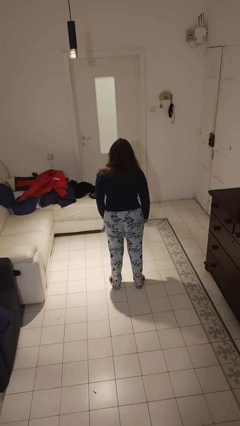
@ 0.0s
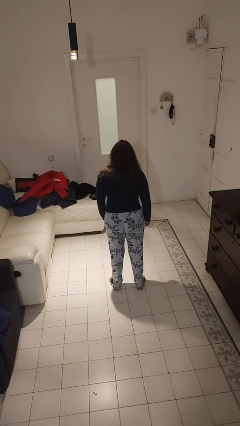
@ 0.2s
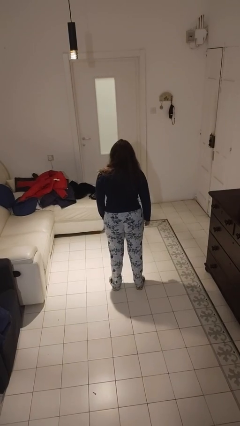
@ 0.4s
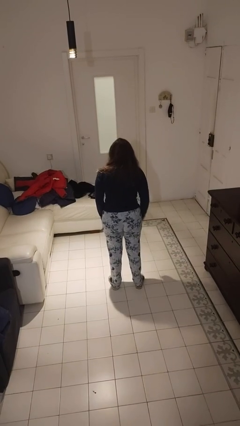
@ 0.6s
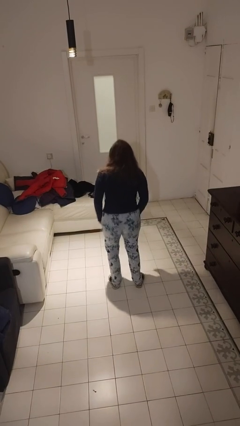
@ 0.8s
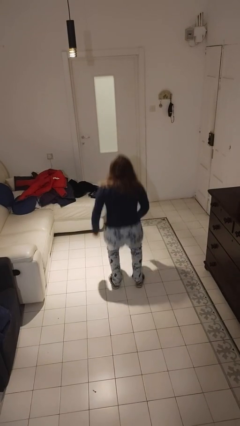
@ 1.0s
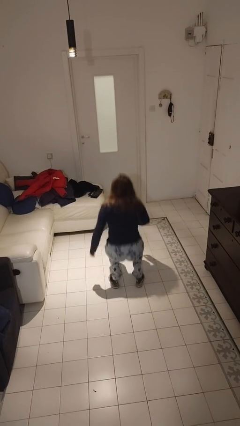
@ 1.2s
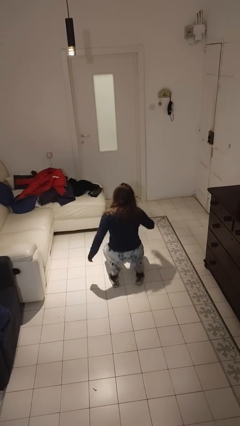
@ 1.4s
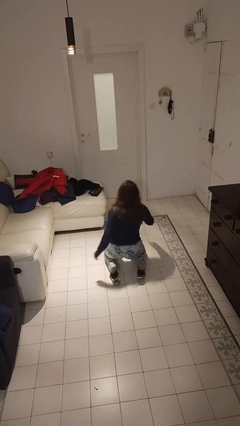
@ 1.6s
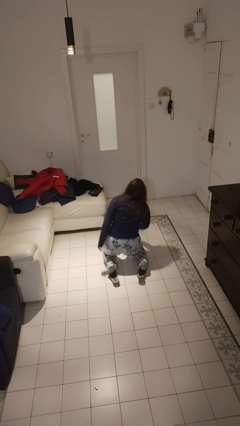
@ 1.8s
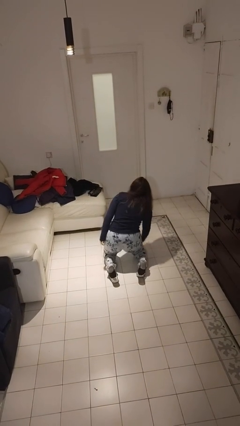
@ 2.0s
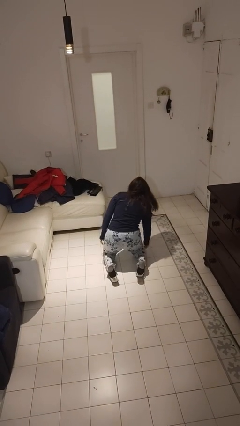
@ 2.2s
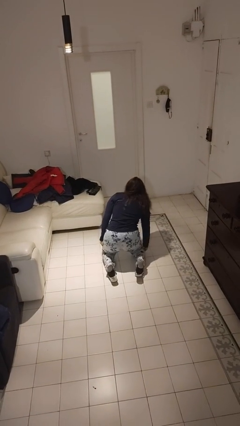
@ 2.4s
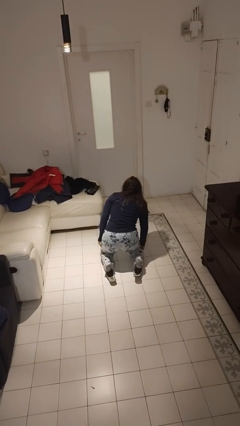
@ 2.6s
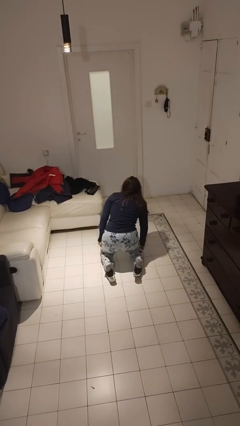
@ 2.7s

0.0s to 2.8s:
person falls while standing

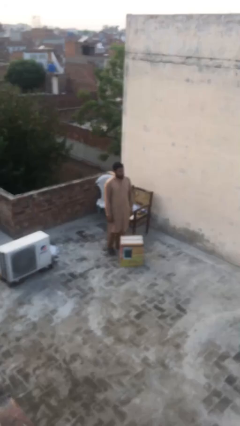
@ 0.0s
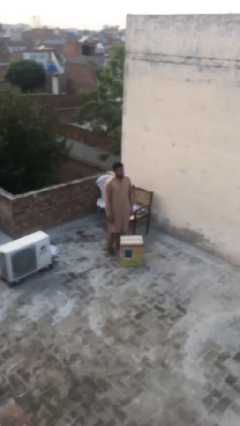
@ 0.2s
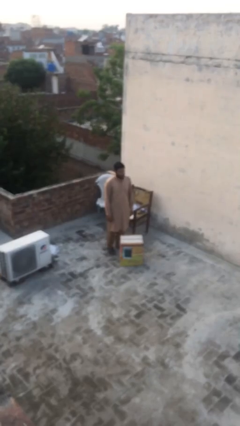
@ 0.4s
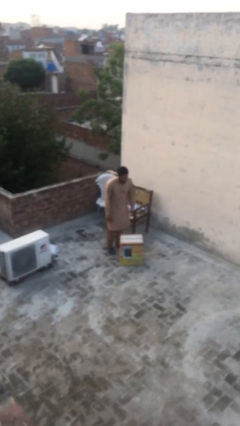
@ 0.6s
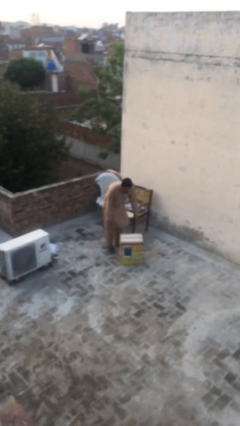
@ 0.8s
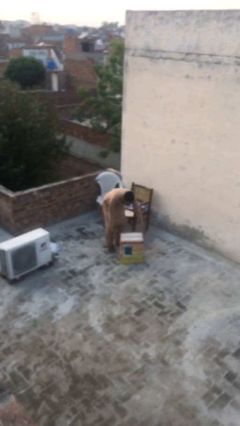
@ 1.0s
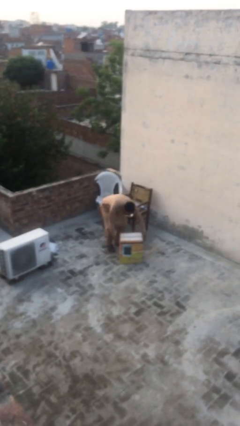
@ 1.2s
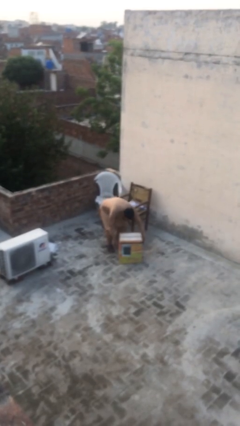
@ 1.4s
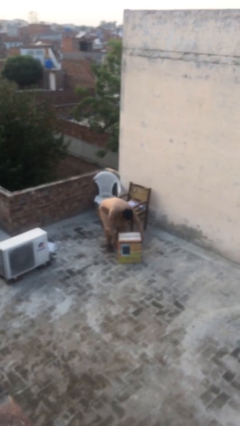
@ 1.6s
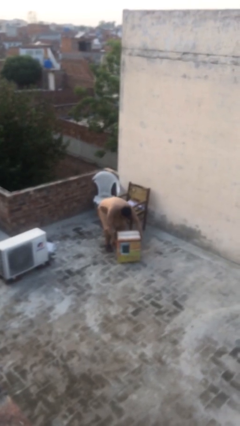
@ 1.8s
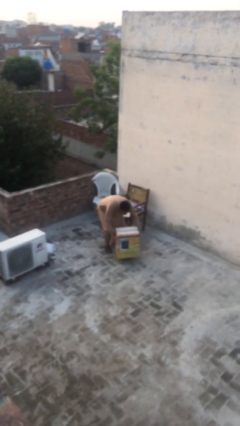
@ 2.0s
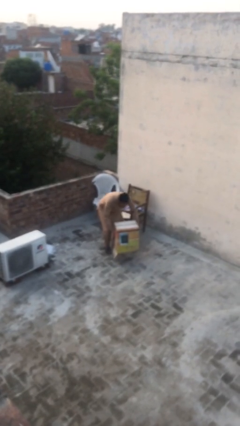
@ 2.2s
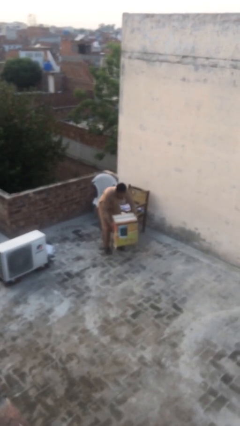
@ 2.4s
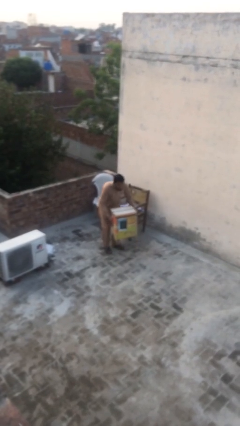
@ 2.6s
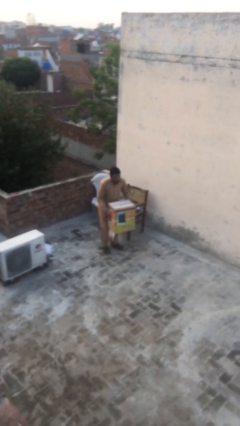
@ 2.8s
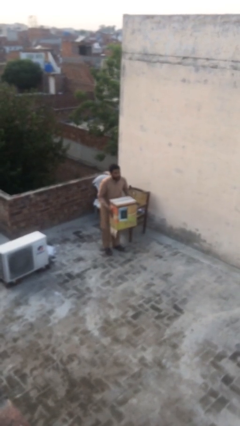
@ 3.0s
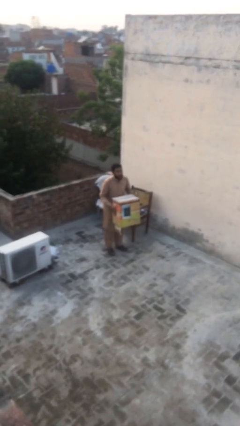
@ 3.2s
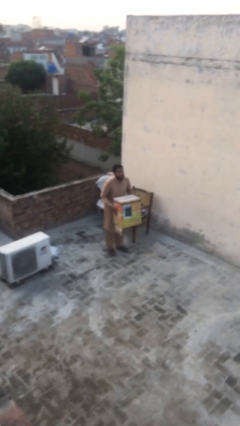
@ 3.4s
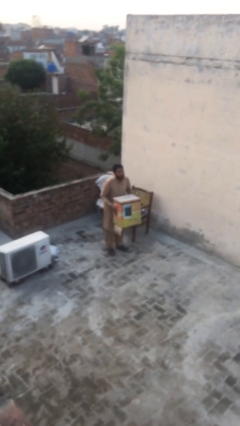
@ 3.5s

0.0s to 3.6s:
person picks up object from floor

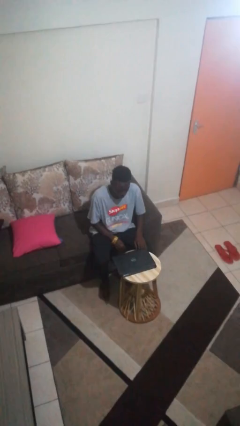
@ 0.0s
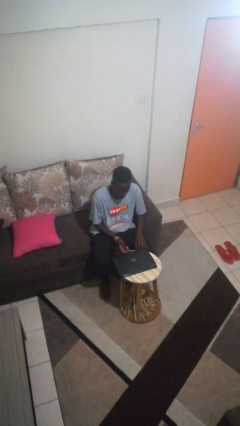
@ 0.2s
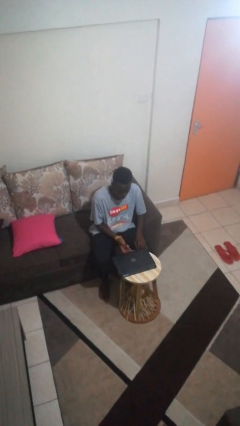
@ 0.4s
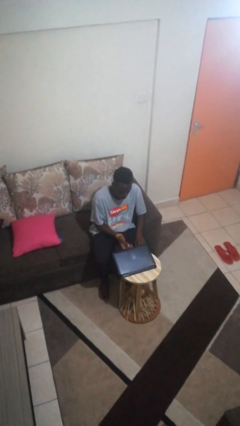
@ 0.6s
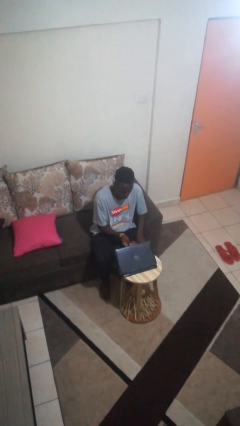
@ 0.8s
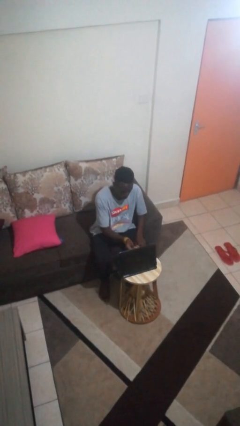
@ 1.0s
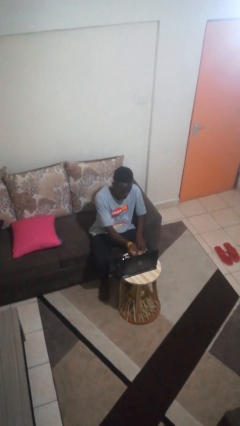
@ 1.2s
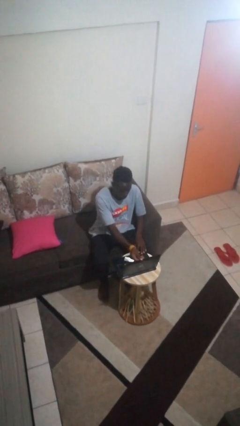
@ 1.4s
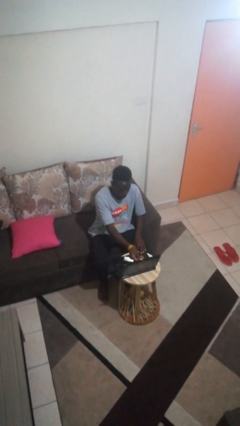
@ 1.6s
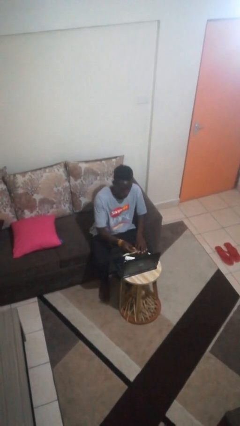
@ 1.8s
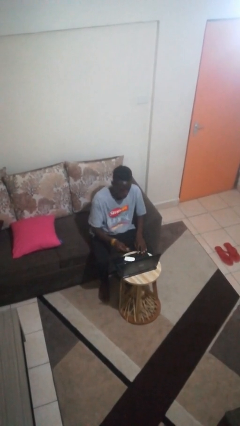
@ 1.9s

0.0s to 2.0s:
person opens laptop

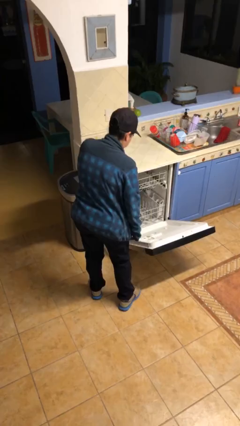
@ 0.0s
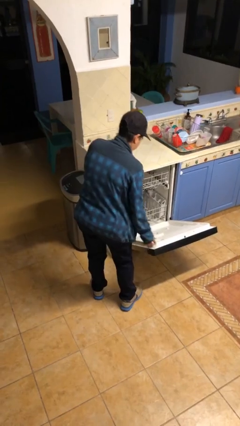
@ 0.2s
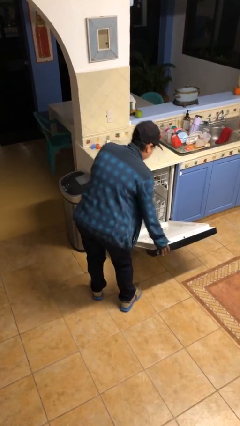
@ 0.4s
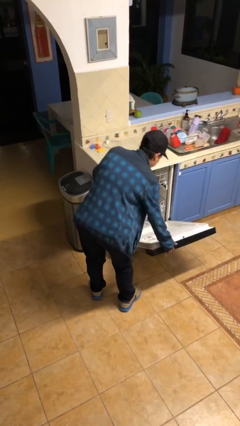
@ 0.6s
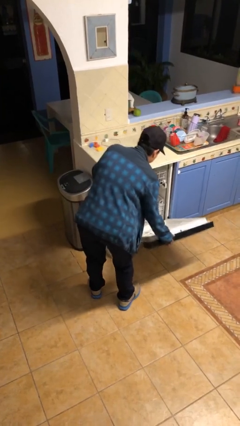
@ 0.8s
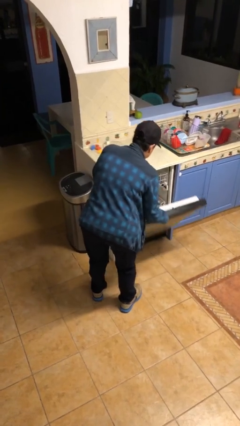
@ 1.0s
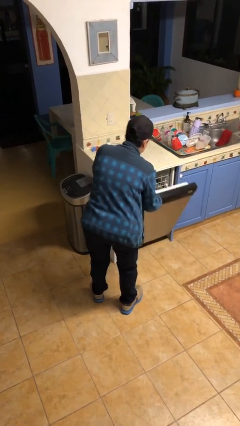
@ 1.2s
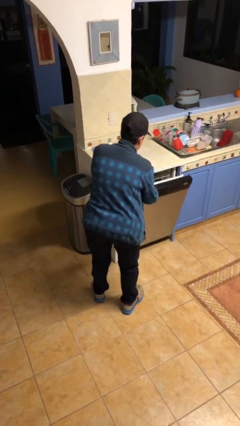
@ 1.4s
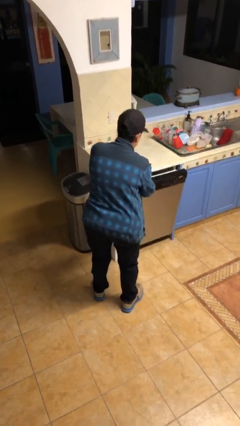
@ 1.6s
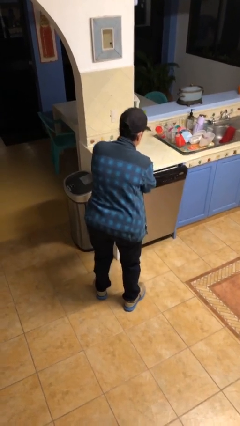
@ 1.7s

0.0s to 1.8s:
person closes dishwasher

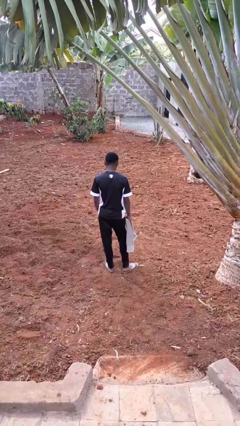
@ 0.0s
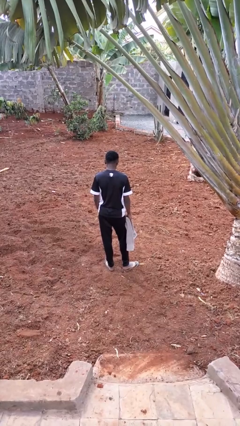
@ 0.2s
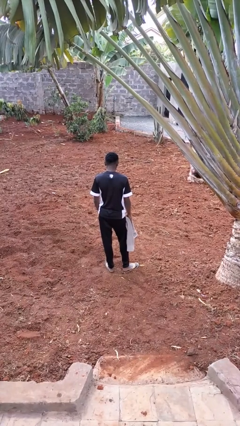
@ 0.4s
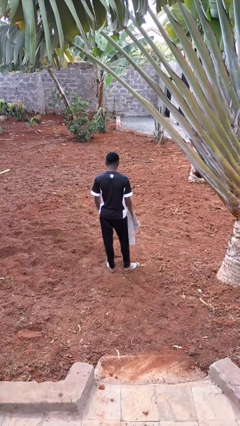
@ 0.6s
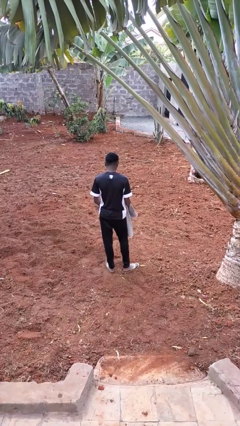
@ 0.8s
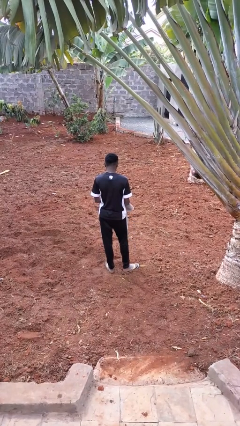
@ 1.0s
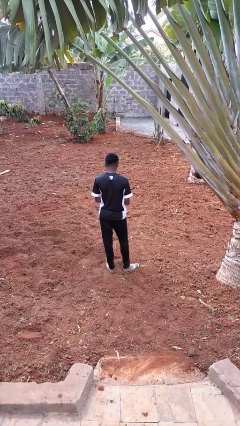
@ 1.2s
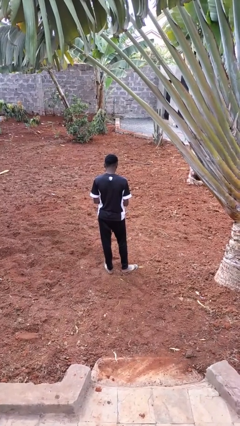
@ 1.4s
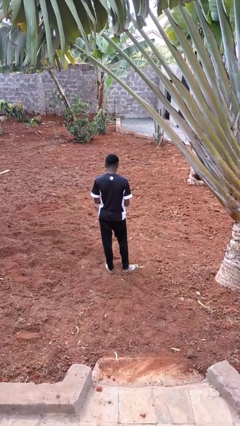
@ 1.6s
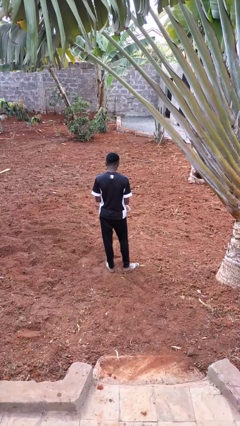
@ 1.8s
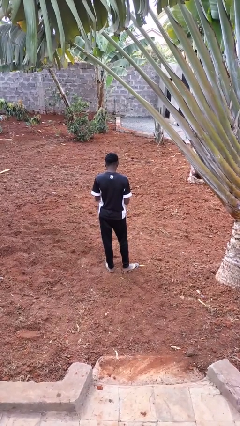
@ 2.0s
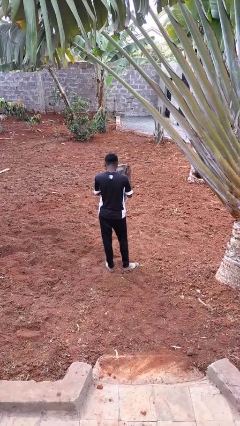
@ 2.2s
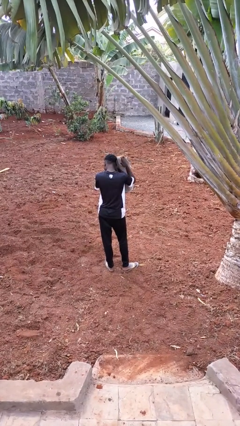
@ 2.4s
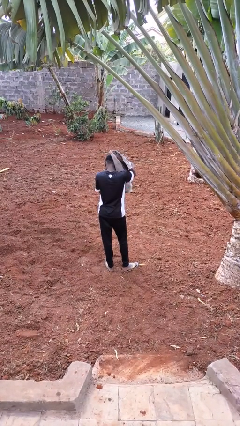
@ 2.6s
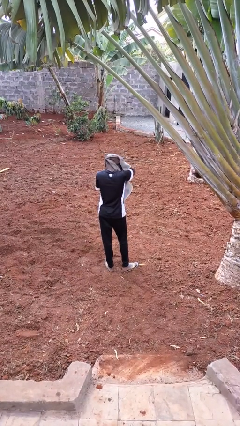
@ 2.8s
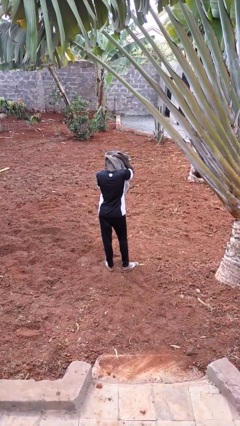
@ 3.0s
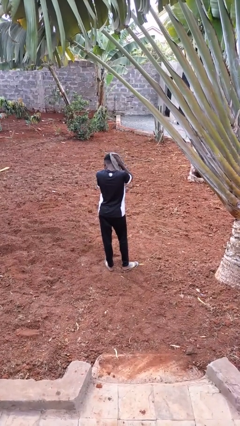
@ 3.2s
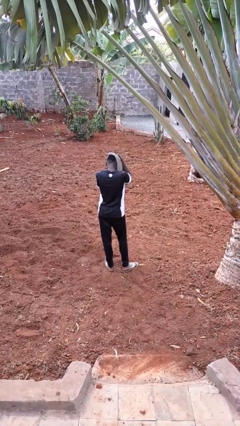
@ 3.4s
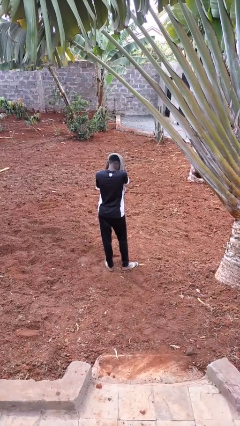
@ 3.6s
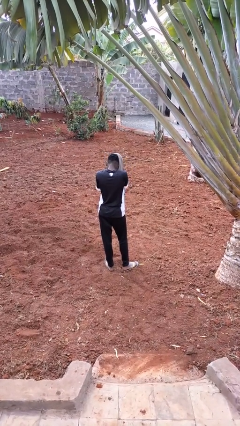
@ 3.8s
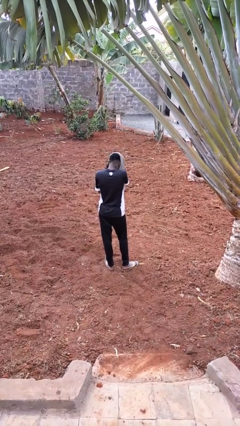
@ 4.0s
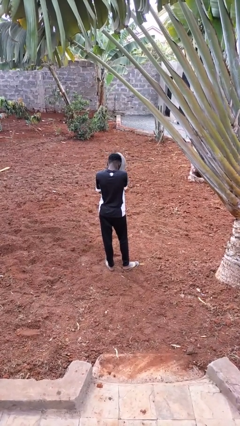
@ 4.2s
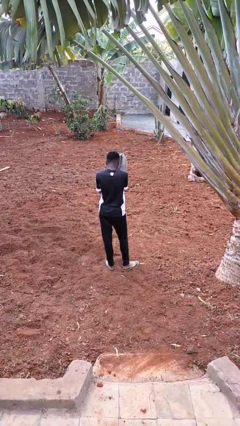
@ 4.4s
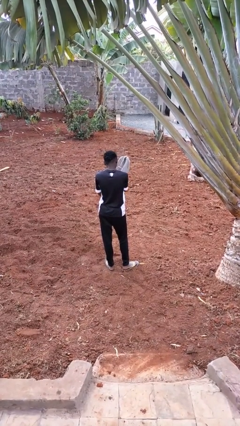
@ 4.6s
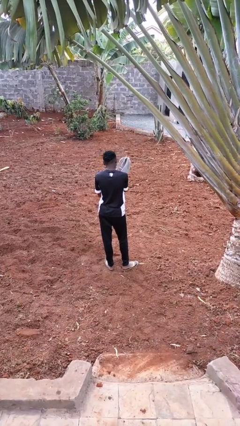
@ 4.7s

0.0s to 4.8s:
person dries hair with towel

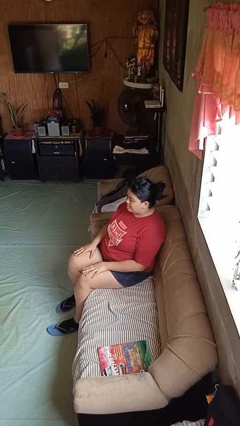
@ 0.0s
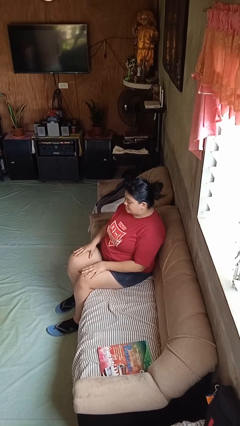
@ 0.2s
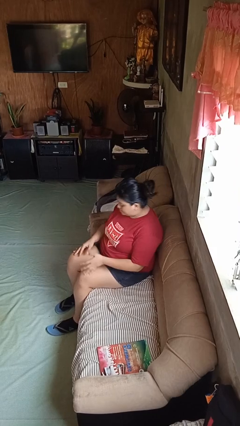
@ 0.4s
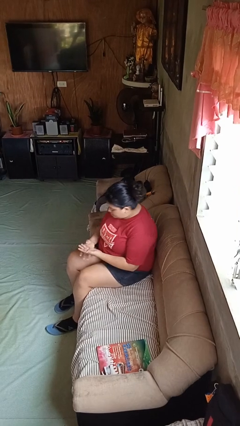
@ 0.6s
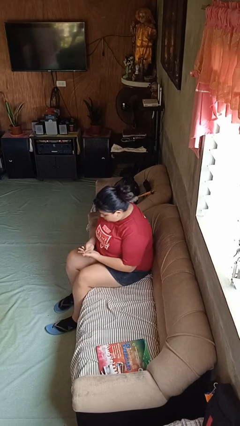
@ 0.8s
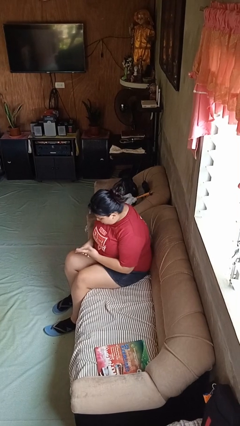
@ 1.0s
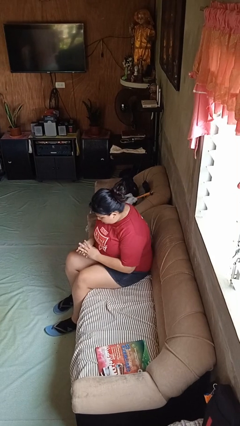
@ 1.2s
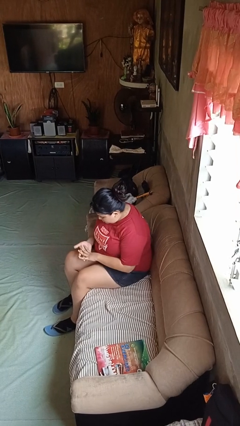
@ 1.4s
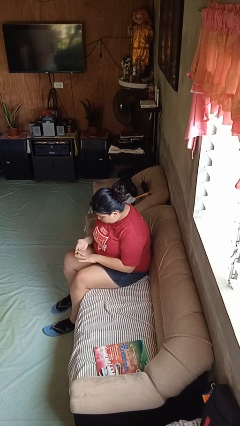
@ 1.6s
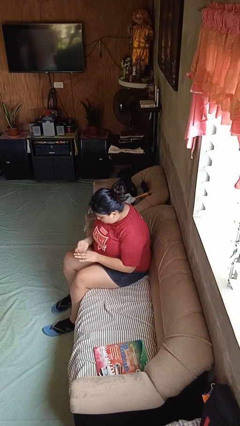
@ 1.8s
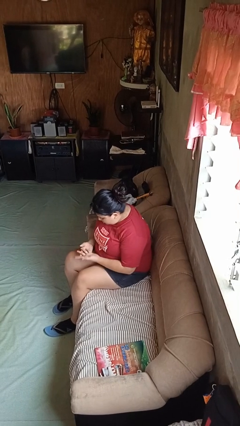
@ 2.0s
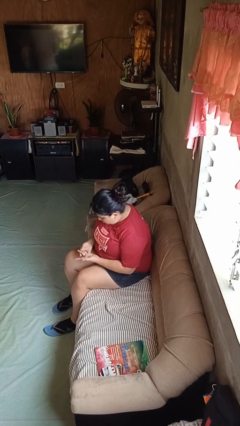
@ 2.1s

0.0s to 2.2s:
person looks at hands in lap

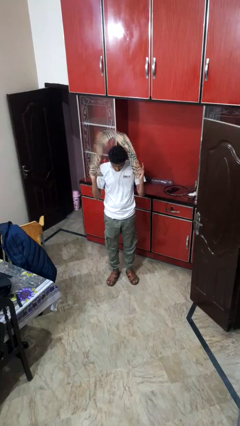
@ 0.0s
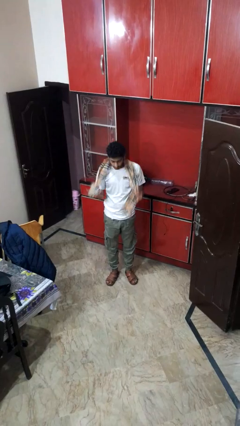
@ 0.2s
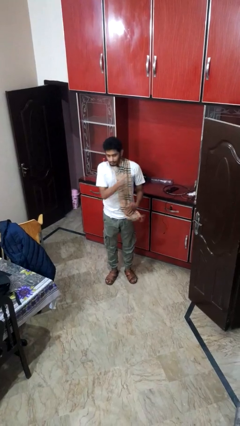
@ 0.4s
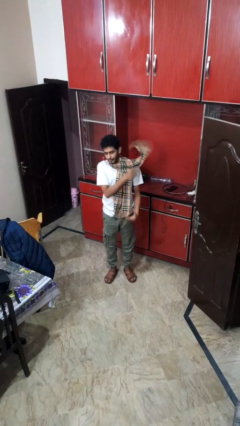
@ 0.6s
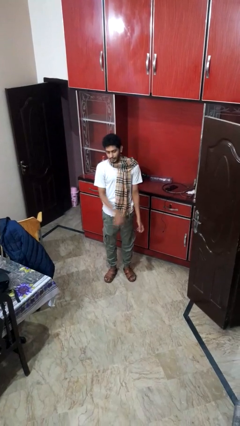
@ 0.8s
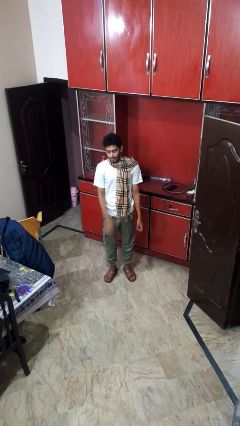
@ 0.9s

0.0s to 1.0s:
person puts on scarf
